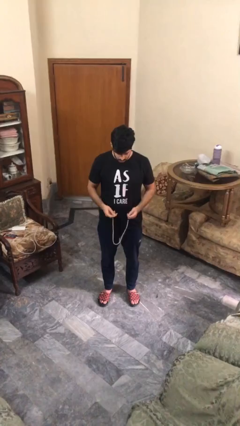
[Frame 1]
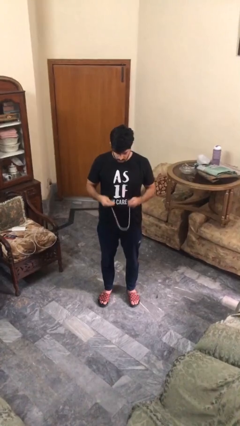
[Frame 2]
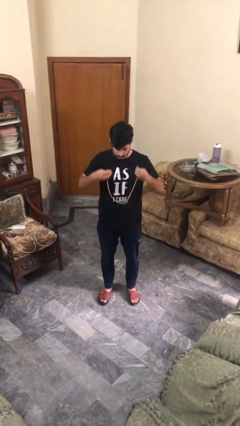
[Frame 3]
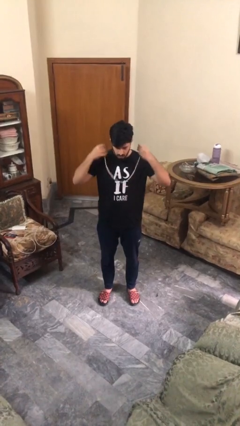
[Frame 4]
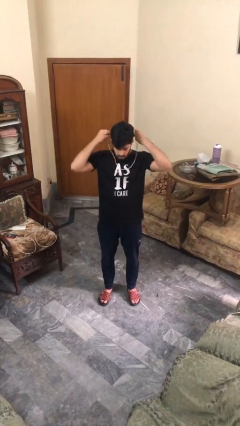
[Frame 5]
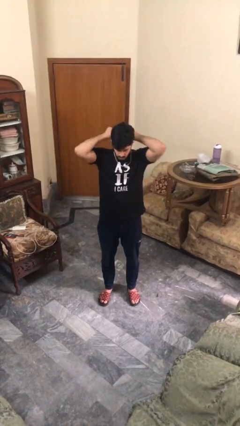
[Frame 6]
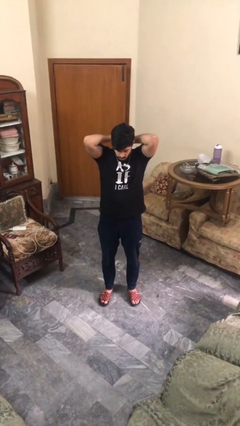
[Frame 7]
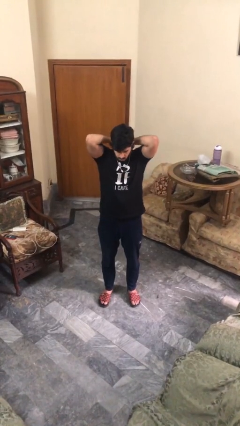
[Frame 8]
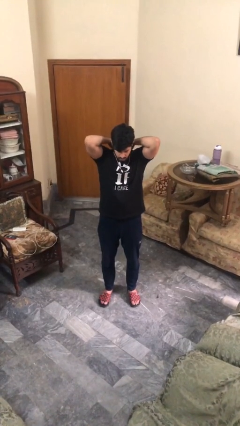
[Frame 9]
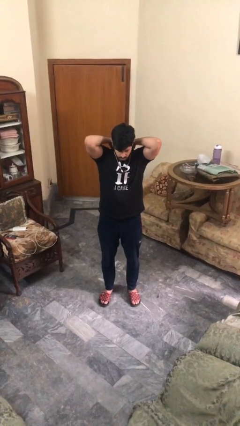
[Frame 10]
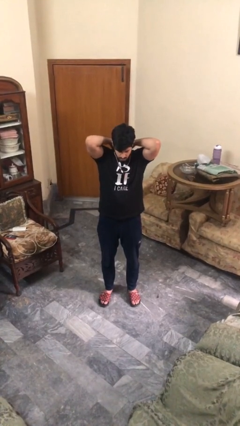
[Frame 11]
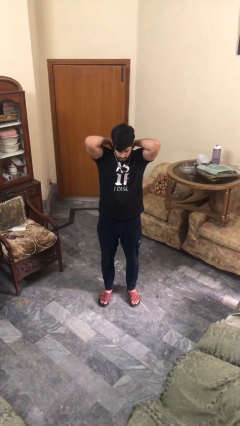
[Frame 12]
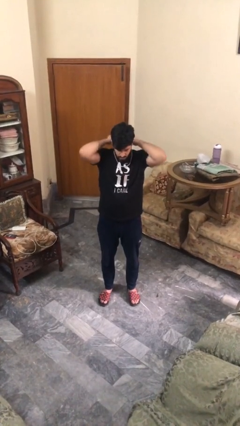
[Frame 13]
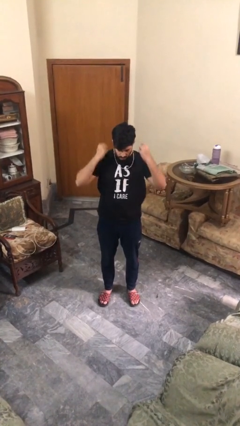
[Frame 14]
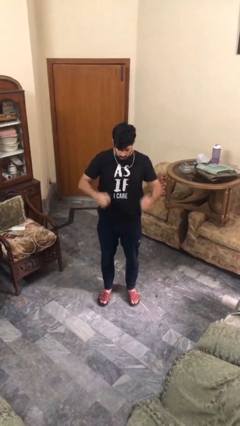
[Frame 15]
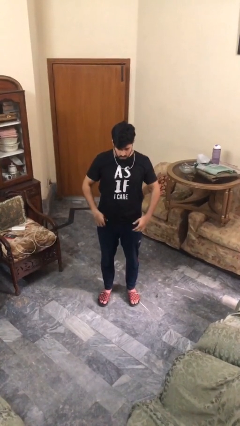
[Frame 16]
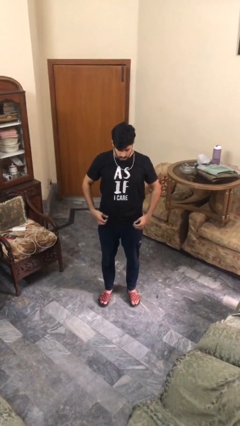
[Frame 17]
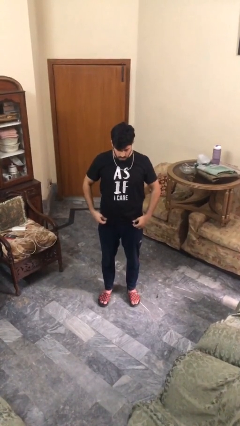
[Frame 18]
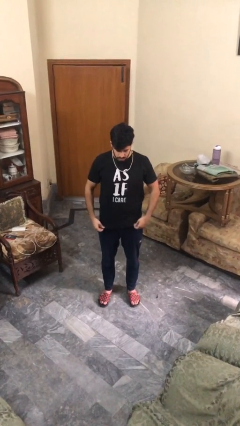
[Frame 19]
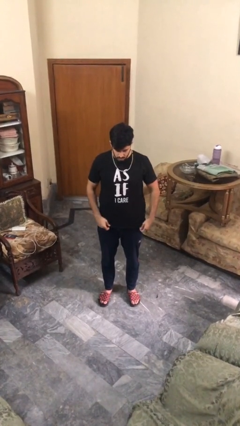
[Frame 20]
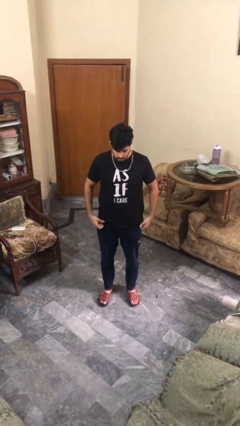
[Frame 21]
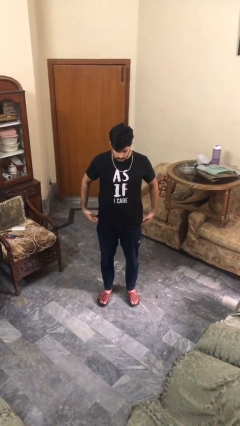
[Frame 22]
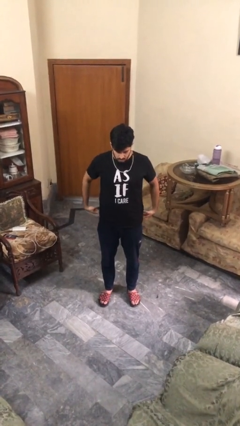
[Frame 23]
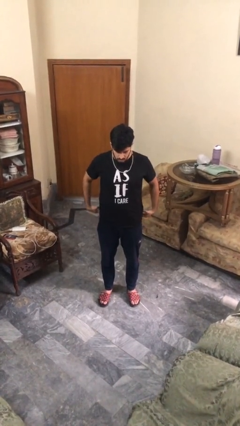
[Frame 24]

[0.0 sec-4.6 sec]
person puts on necklace

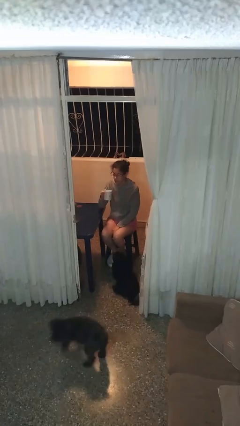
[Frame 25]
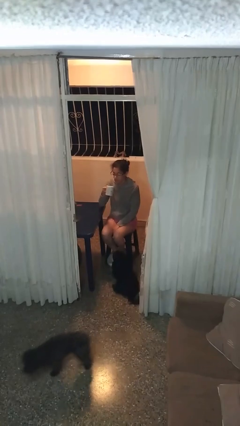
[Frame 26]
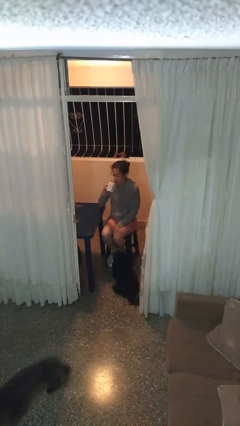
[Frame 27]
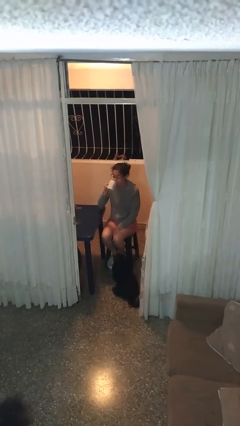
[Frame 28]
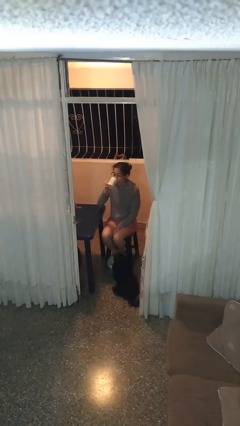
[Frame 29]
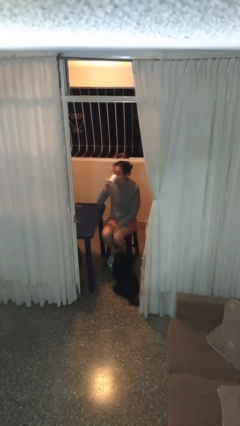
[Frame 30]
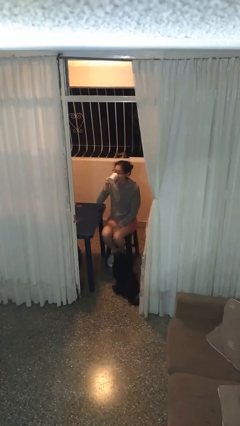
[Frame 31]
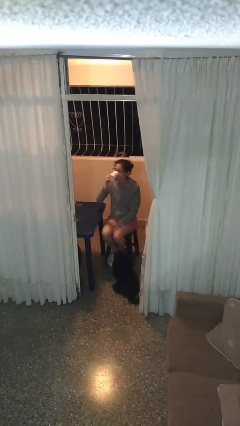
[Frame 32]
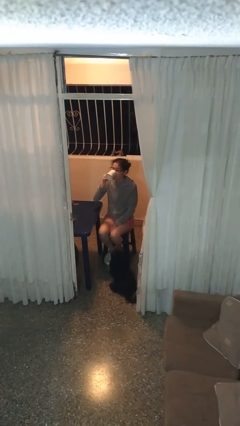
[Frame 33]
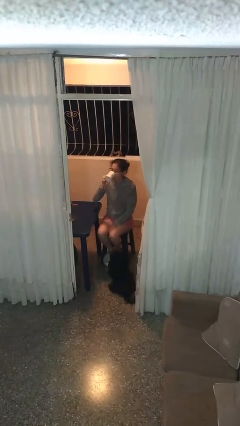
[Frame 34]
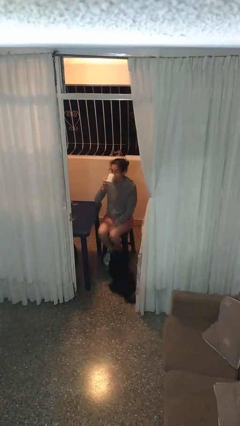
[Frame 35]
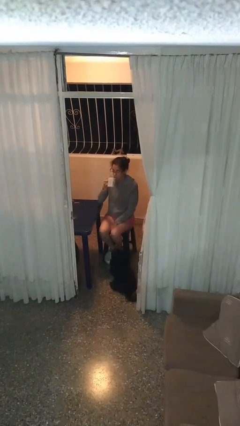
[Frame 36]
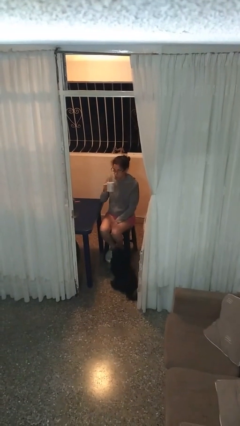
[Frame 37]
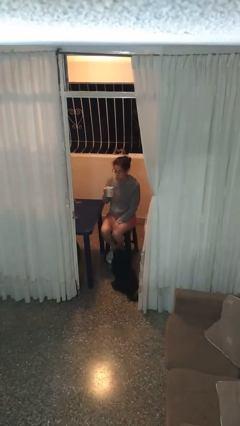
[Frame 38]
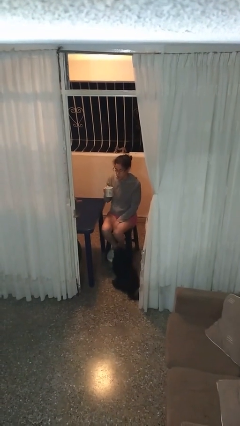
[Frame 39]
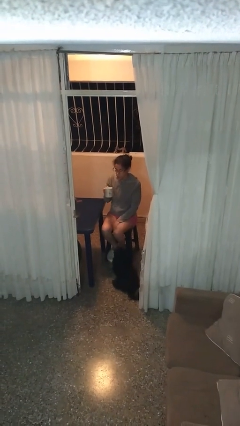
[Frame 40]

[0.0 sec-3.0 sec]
person drinks from mug

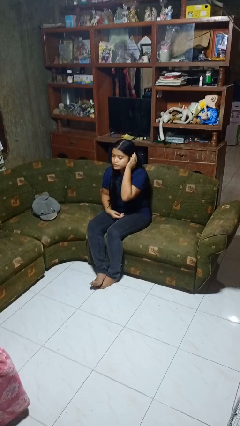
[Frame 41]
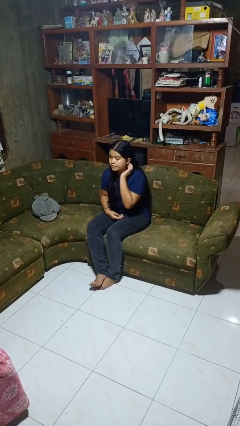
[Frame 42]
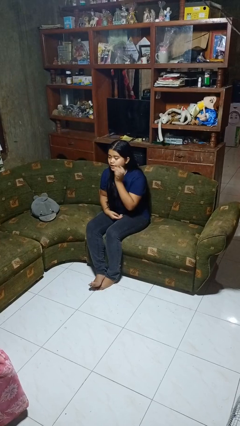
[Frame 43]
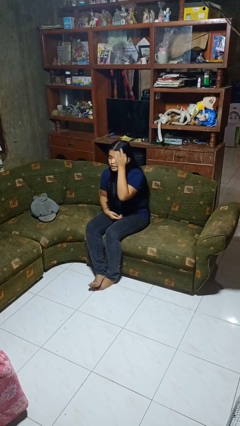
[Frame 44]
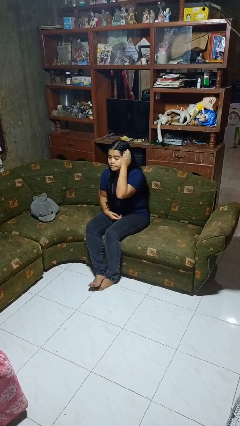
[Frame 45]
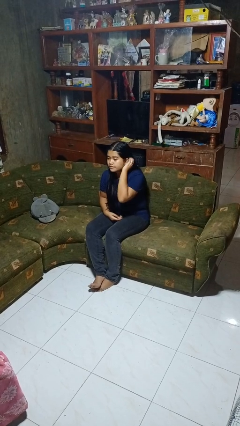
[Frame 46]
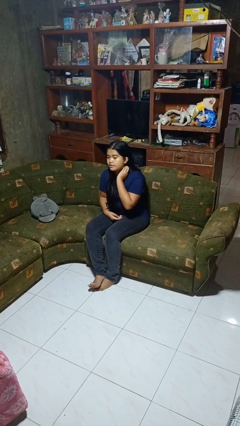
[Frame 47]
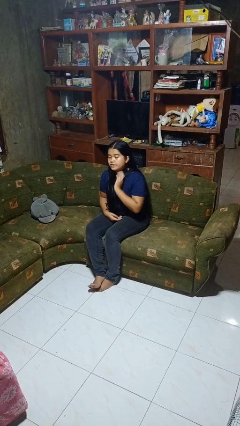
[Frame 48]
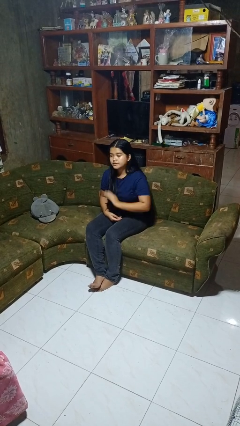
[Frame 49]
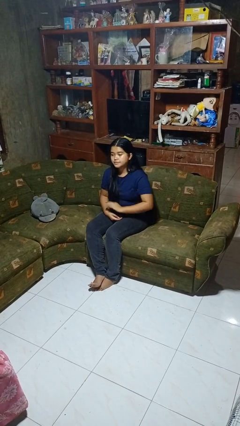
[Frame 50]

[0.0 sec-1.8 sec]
person strokes hair

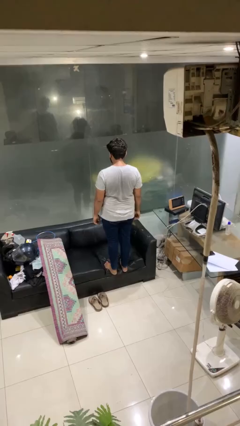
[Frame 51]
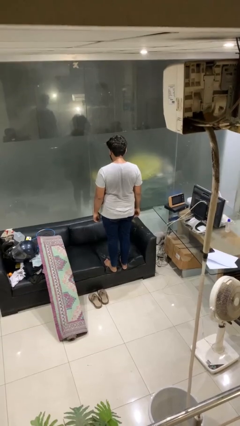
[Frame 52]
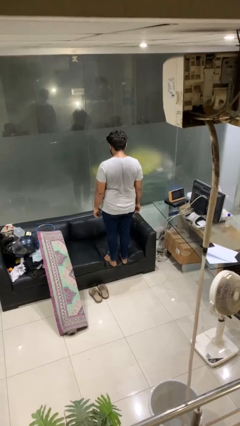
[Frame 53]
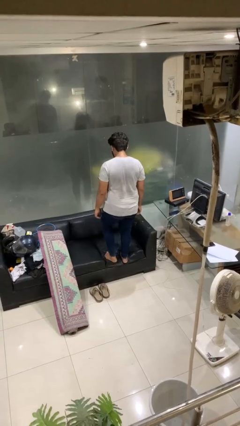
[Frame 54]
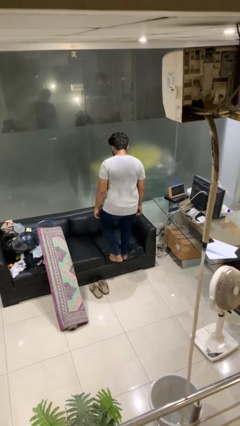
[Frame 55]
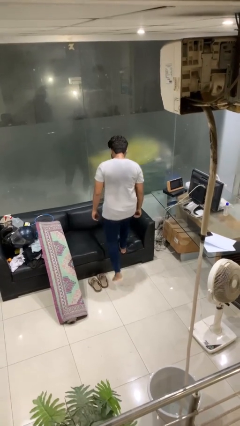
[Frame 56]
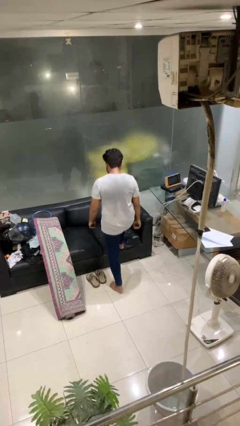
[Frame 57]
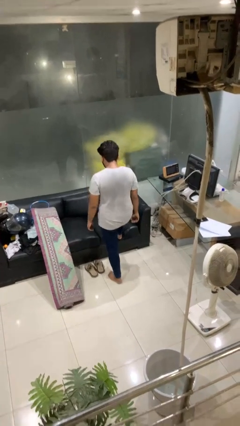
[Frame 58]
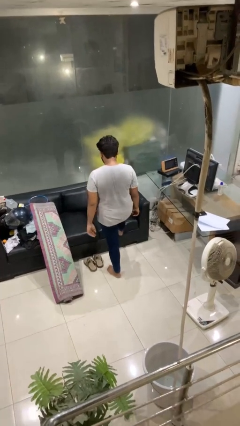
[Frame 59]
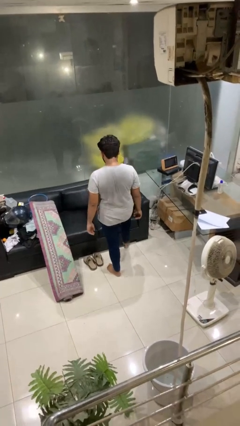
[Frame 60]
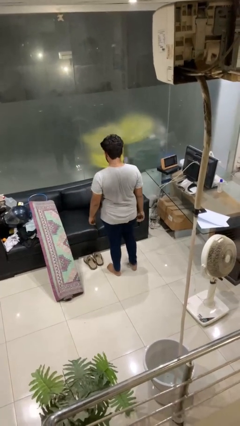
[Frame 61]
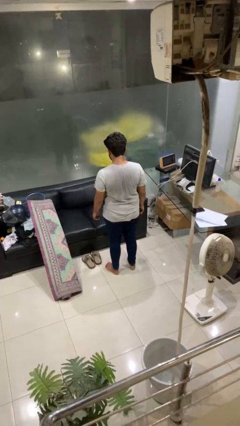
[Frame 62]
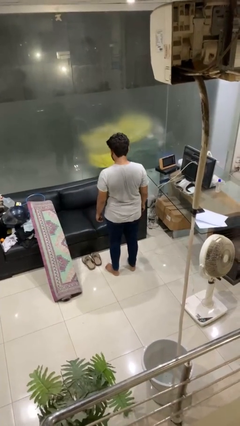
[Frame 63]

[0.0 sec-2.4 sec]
person climbs off couch

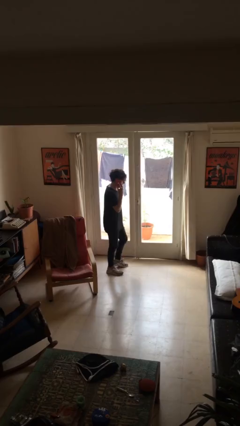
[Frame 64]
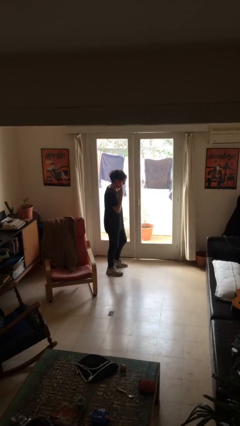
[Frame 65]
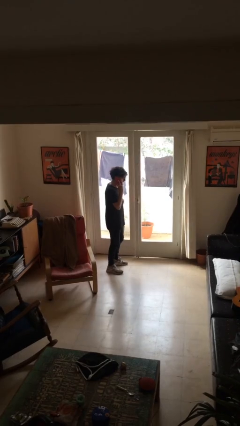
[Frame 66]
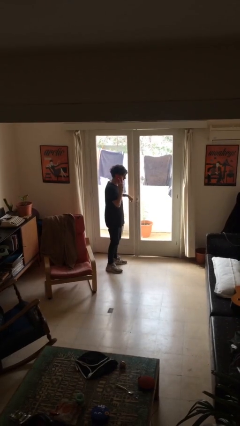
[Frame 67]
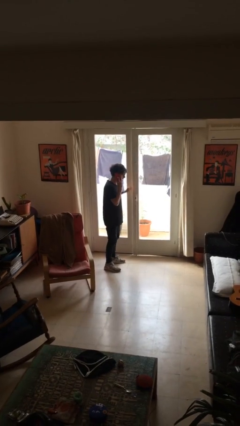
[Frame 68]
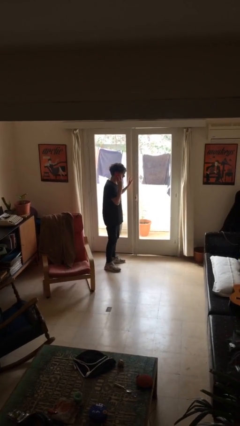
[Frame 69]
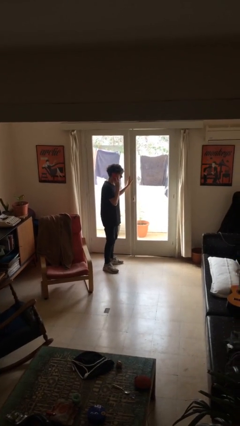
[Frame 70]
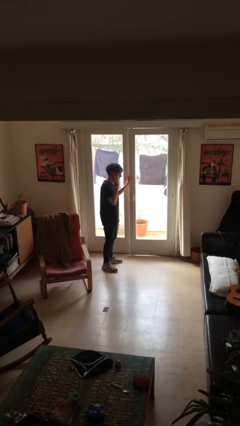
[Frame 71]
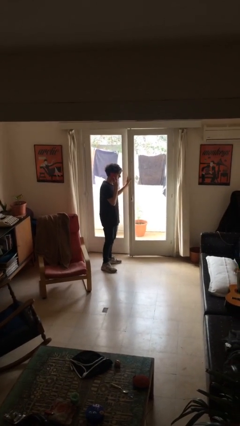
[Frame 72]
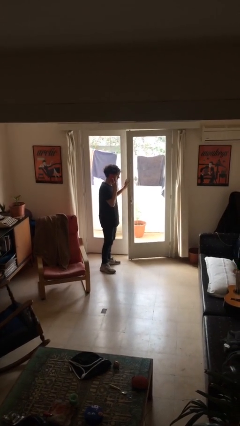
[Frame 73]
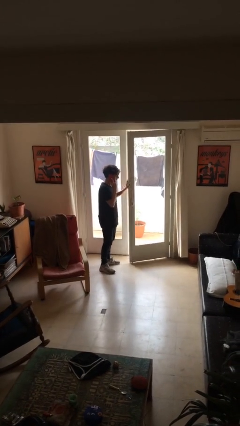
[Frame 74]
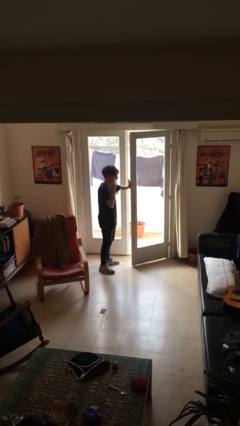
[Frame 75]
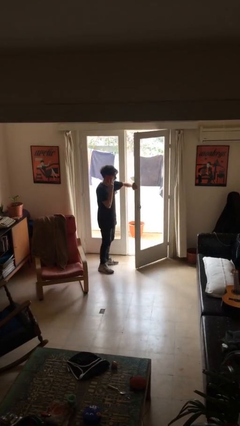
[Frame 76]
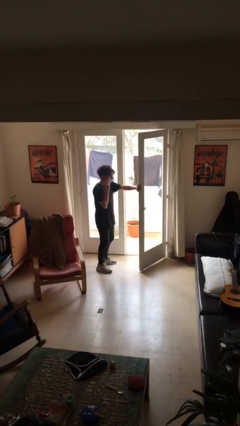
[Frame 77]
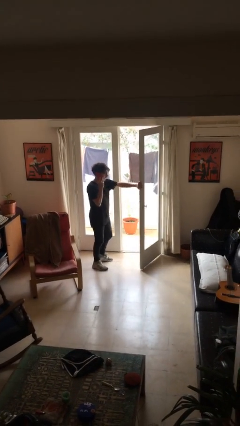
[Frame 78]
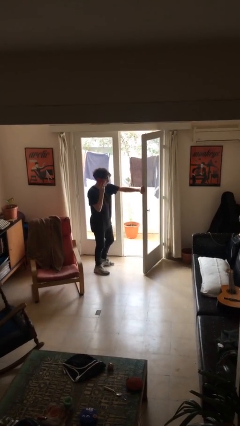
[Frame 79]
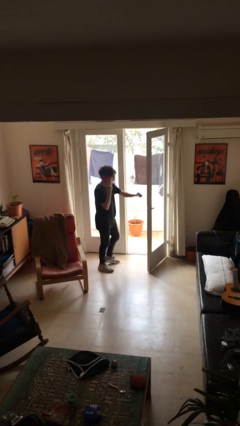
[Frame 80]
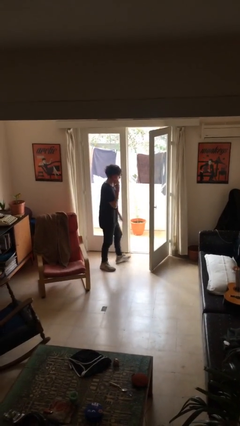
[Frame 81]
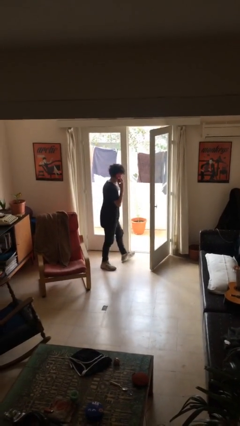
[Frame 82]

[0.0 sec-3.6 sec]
person opens facility door

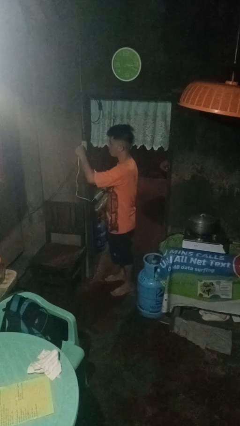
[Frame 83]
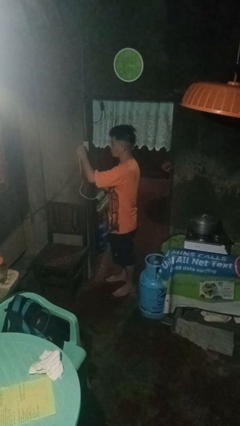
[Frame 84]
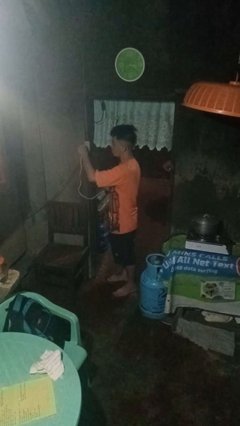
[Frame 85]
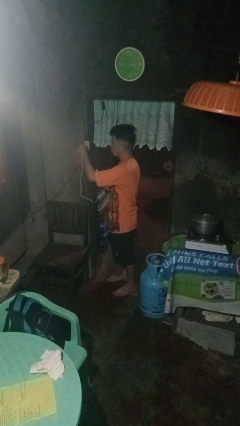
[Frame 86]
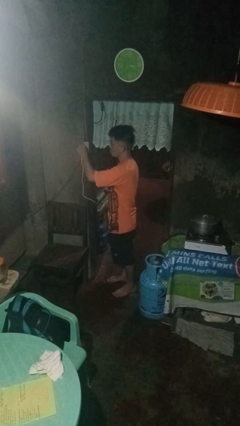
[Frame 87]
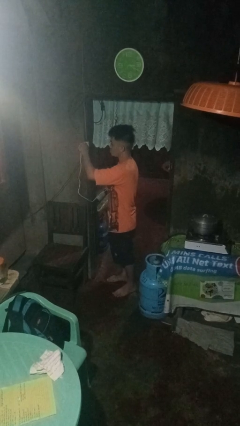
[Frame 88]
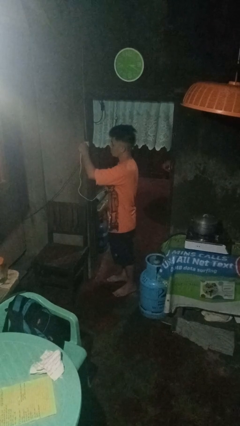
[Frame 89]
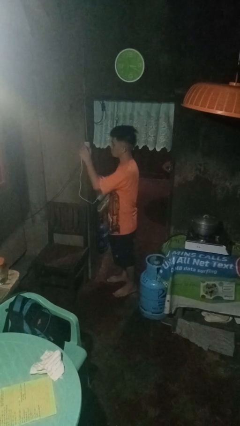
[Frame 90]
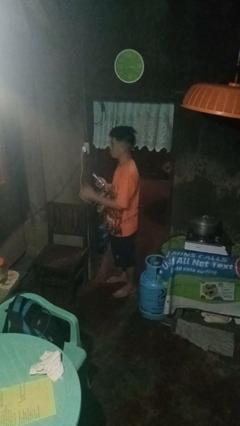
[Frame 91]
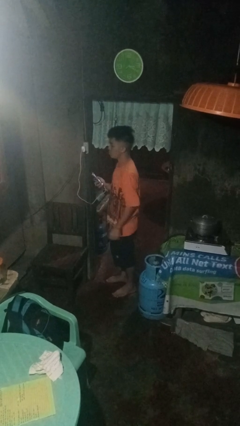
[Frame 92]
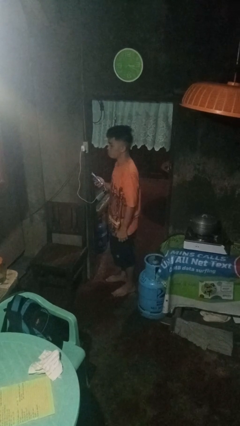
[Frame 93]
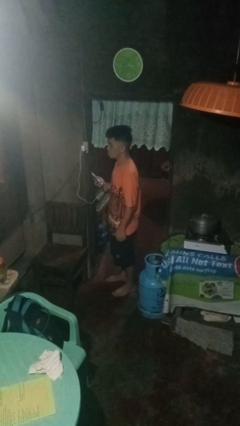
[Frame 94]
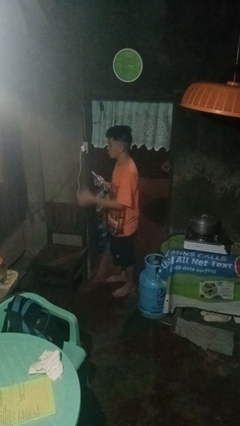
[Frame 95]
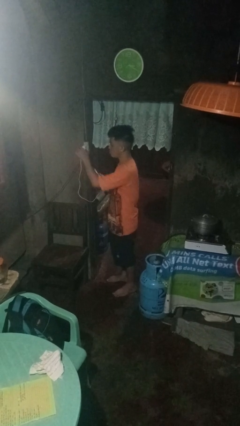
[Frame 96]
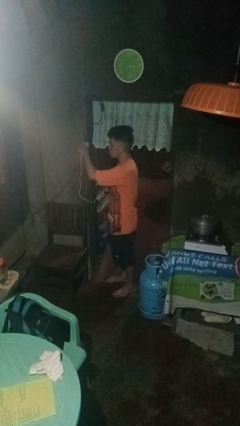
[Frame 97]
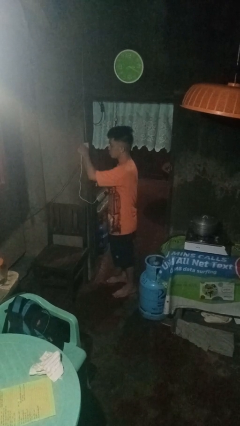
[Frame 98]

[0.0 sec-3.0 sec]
person plugs into electrical socket
